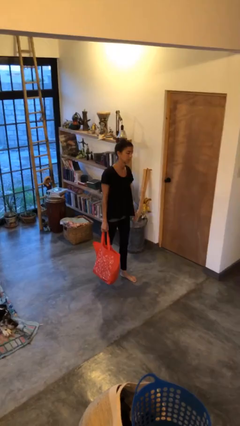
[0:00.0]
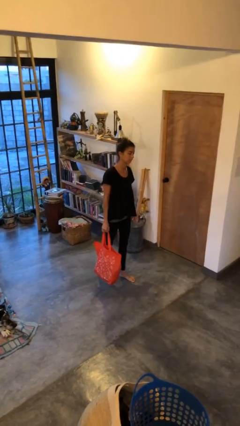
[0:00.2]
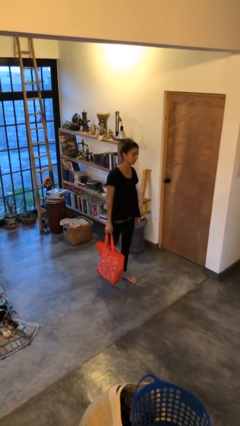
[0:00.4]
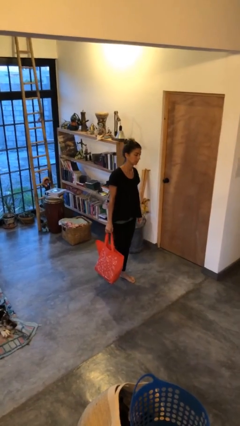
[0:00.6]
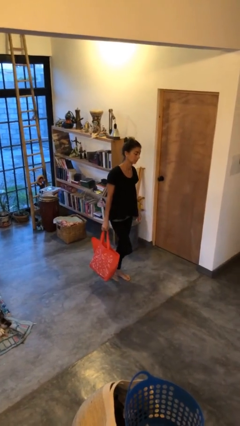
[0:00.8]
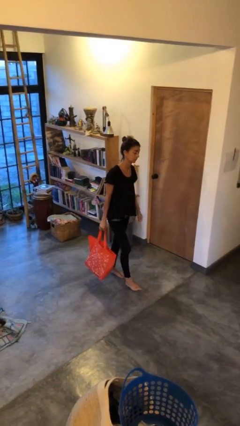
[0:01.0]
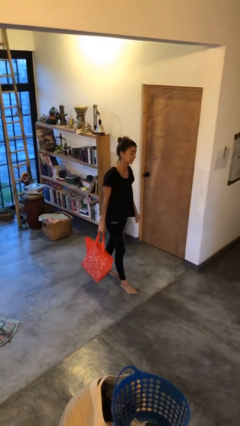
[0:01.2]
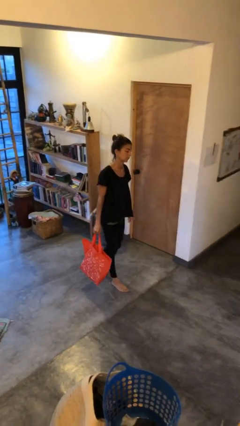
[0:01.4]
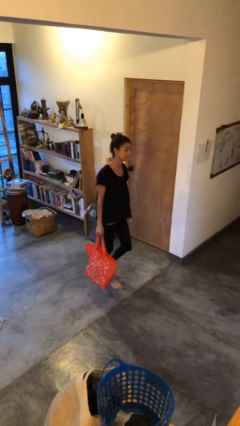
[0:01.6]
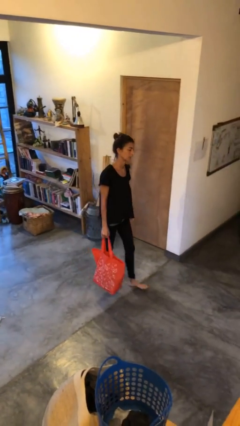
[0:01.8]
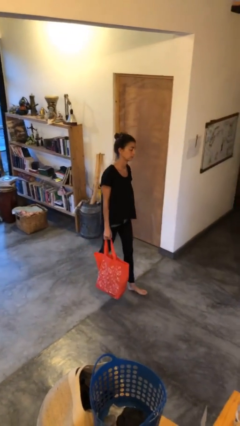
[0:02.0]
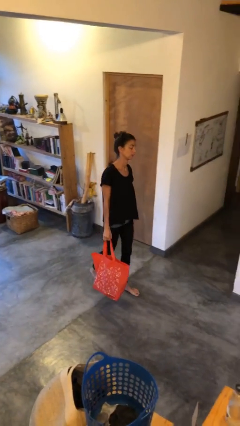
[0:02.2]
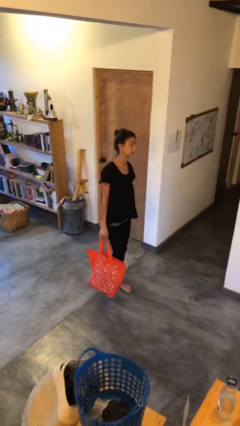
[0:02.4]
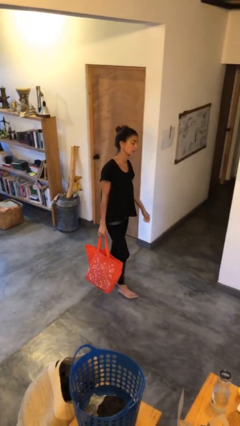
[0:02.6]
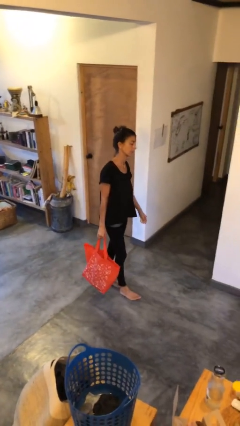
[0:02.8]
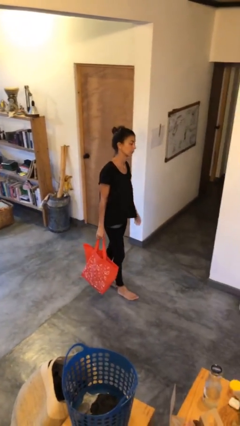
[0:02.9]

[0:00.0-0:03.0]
person carries groceries

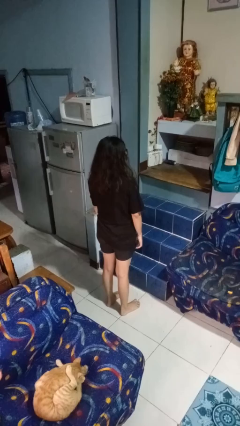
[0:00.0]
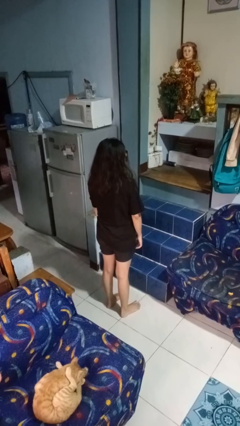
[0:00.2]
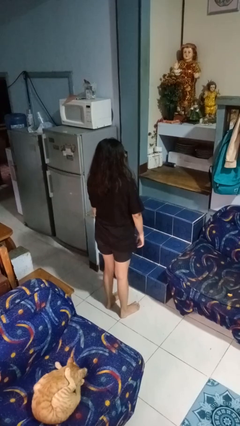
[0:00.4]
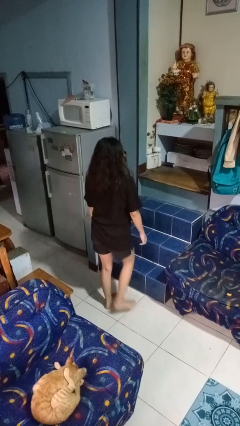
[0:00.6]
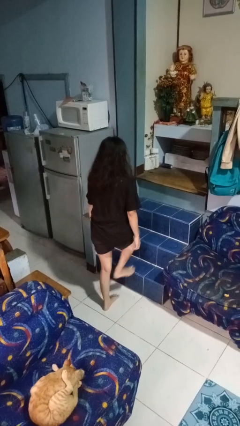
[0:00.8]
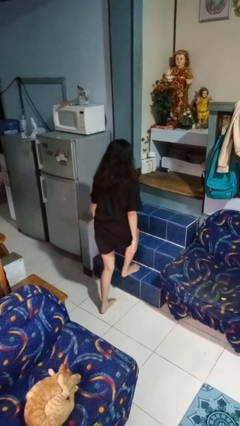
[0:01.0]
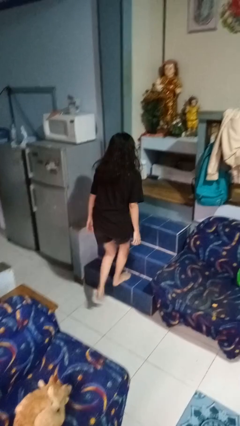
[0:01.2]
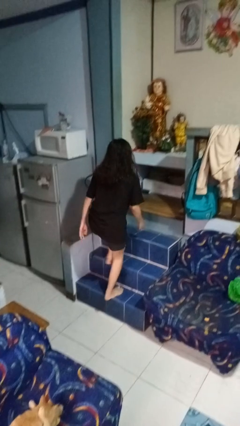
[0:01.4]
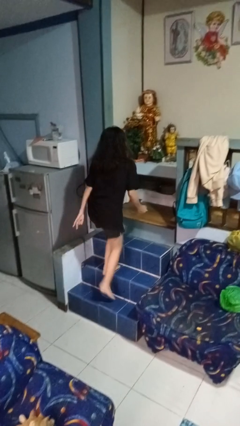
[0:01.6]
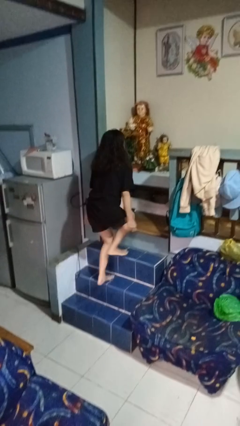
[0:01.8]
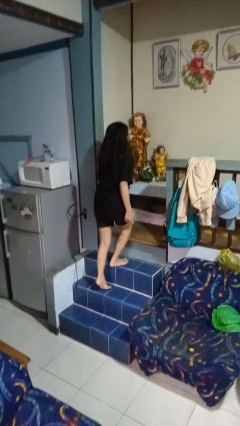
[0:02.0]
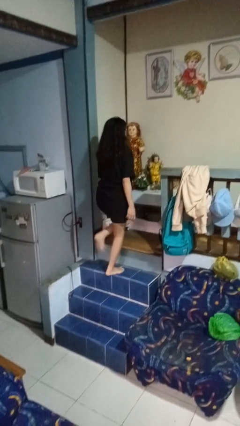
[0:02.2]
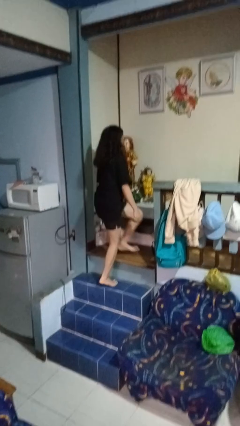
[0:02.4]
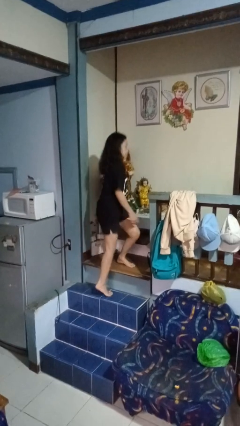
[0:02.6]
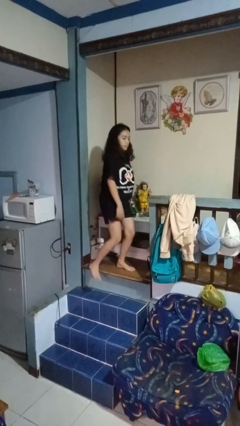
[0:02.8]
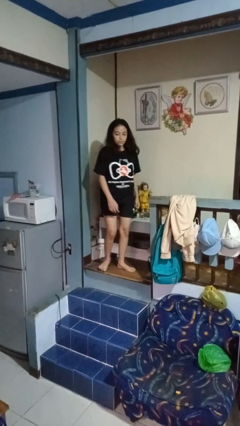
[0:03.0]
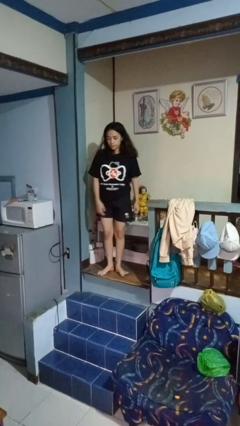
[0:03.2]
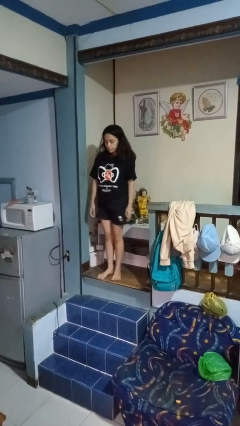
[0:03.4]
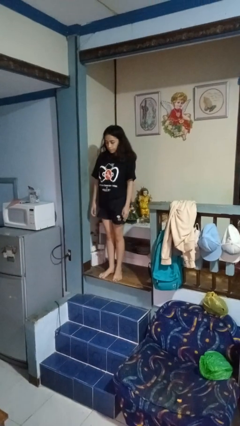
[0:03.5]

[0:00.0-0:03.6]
person climbs up stairs

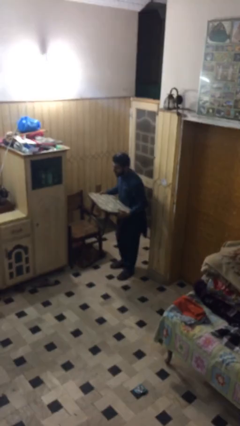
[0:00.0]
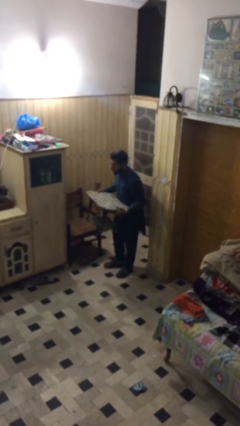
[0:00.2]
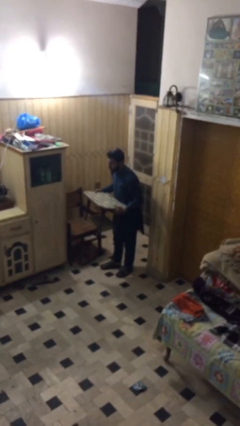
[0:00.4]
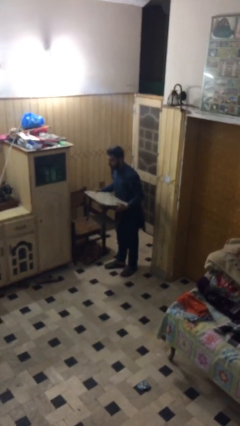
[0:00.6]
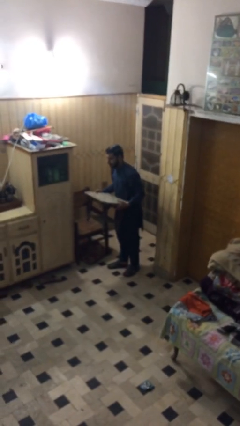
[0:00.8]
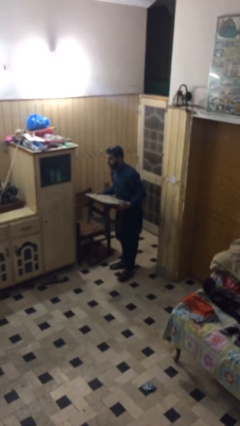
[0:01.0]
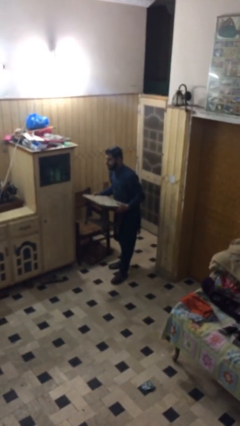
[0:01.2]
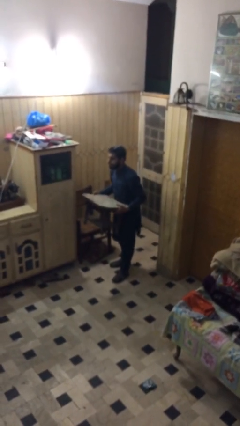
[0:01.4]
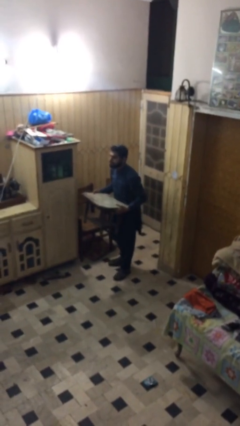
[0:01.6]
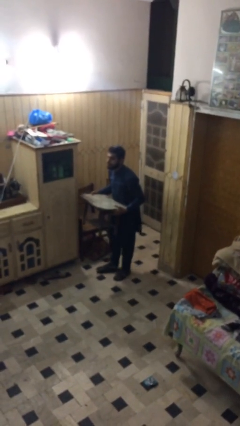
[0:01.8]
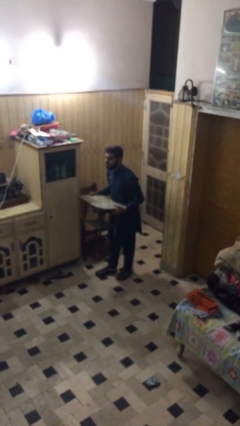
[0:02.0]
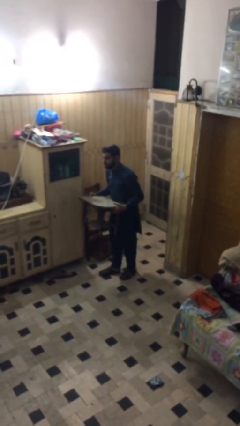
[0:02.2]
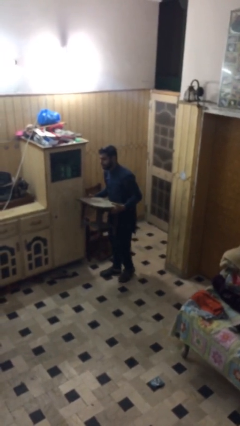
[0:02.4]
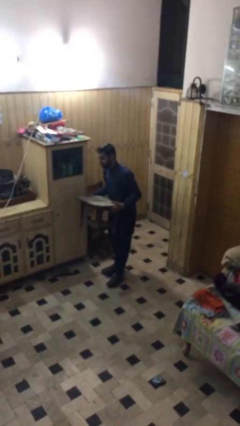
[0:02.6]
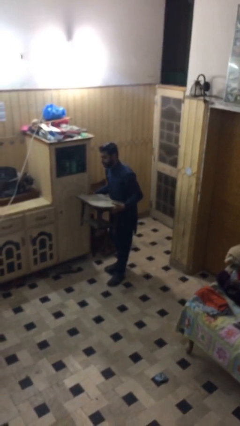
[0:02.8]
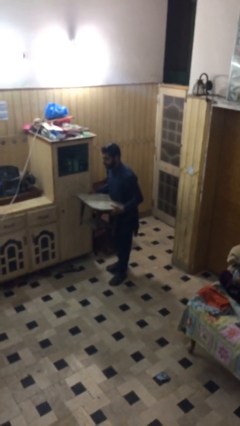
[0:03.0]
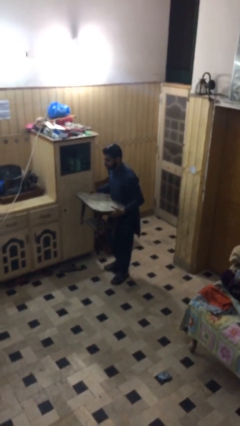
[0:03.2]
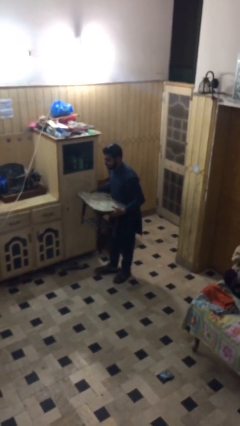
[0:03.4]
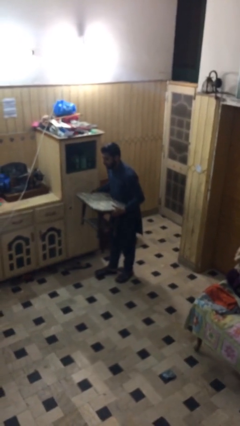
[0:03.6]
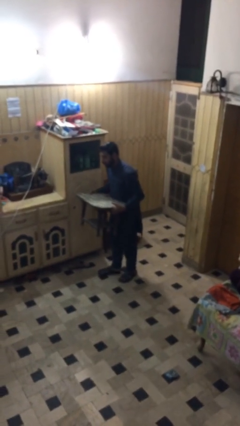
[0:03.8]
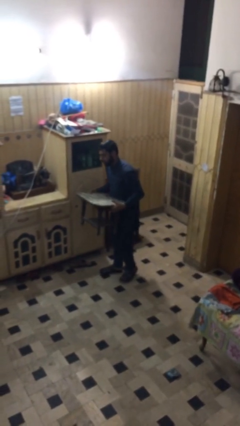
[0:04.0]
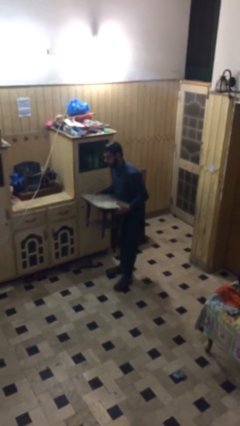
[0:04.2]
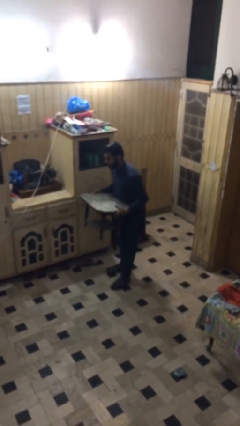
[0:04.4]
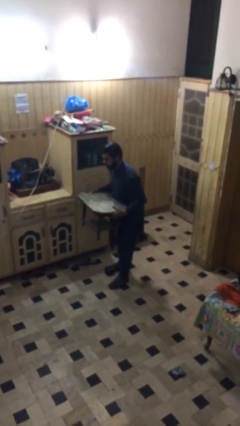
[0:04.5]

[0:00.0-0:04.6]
person carries heavy object

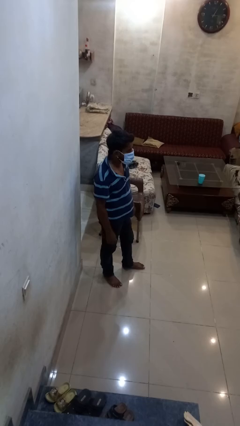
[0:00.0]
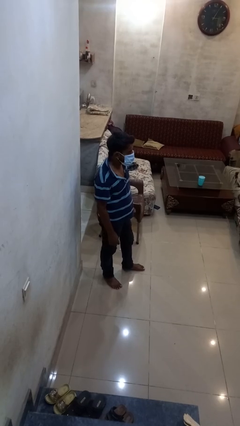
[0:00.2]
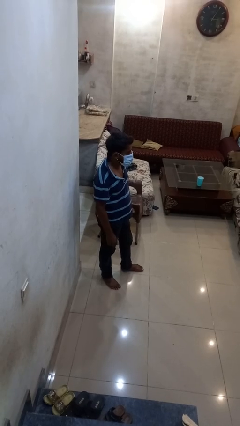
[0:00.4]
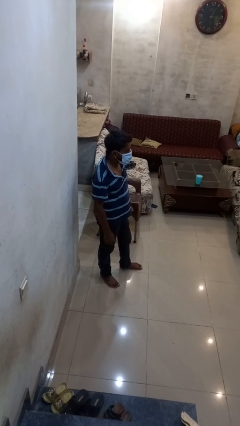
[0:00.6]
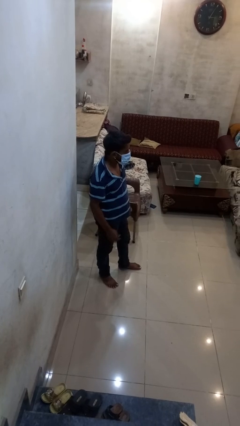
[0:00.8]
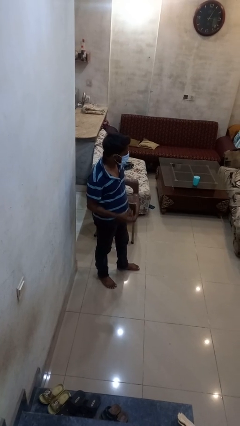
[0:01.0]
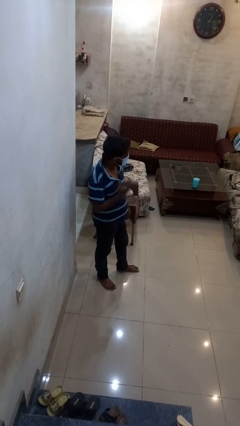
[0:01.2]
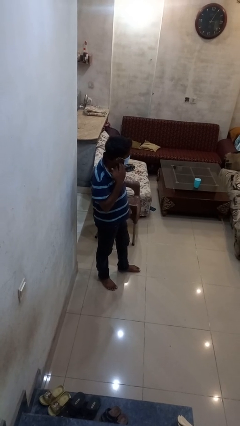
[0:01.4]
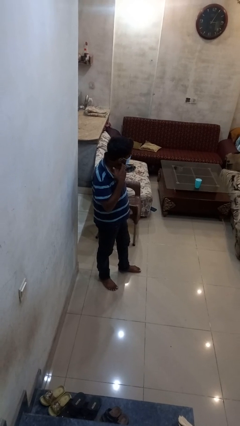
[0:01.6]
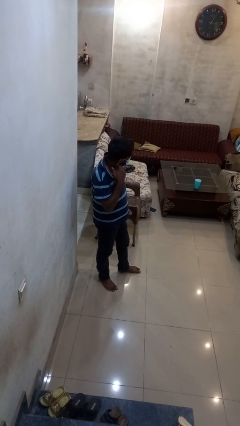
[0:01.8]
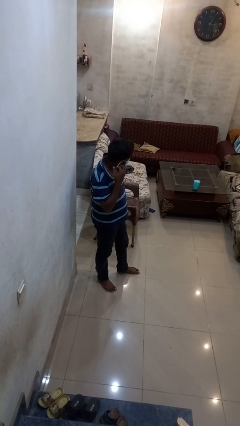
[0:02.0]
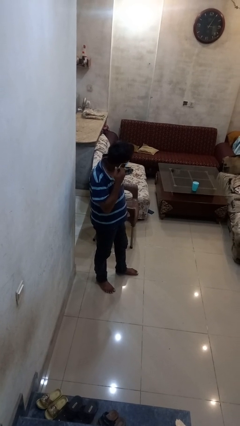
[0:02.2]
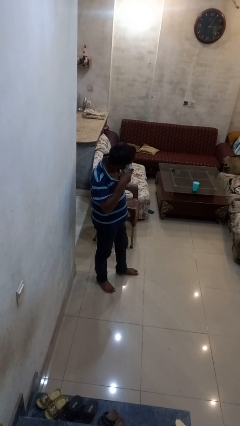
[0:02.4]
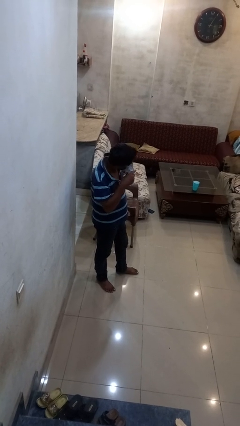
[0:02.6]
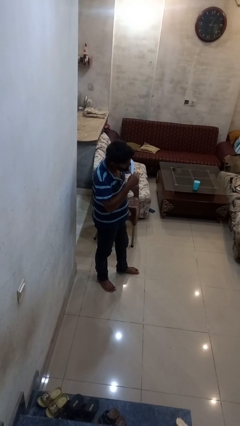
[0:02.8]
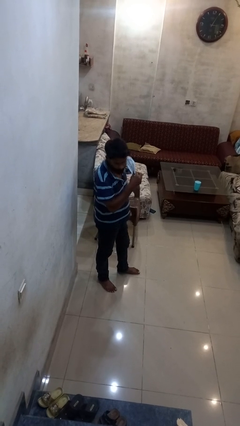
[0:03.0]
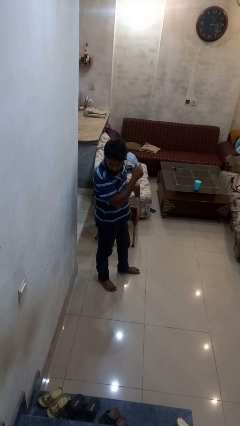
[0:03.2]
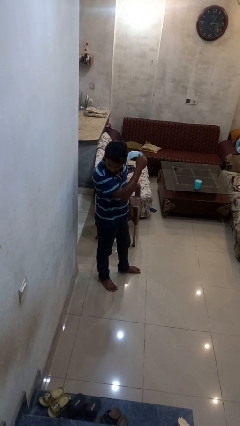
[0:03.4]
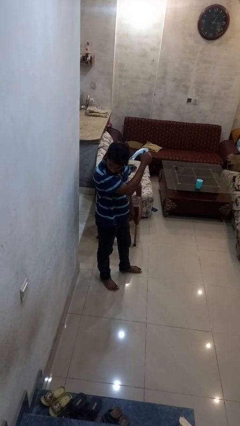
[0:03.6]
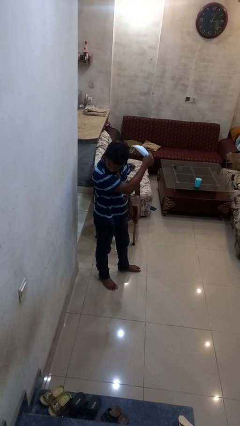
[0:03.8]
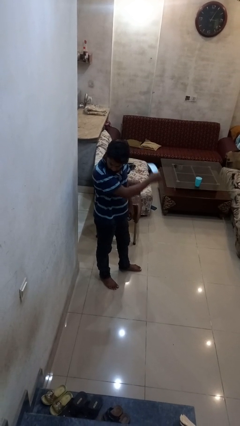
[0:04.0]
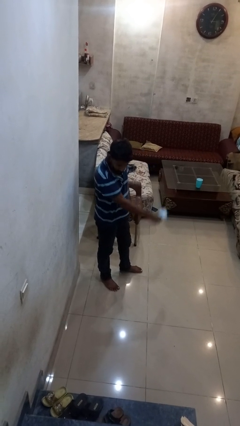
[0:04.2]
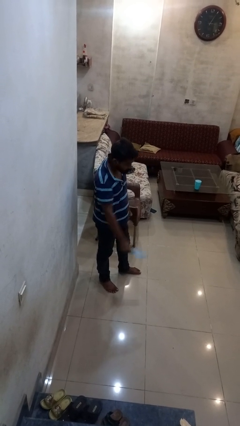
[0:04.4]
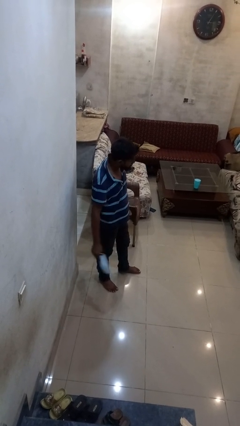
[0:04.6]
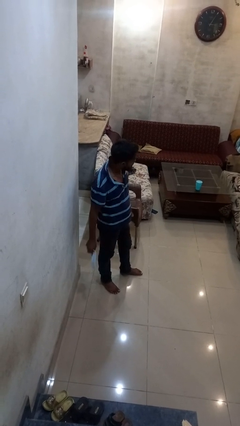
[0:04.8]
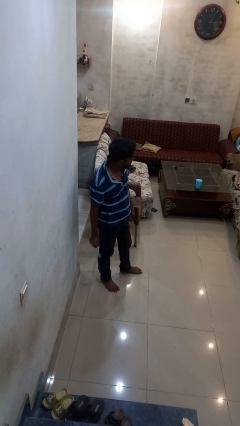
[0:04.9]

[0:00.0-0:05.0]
person takes off facemask

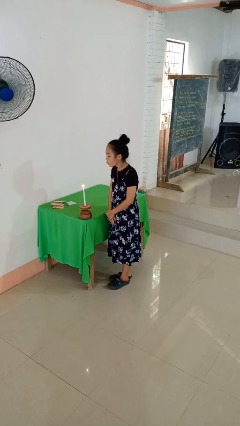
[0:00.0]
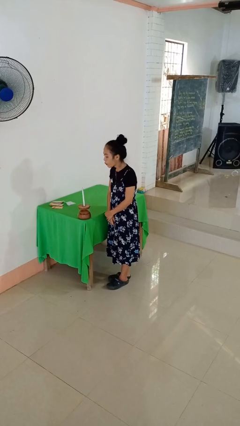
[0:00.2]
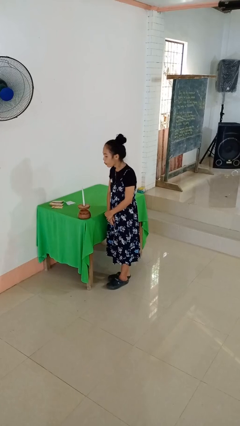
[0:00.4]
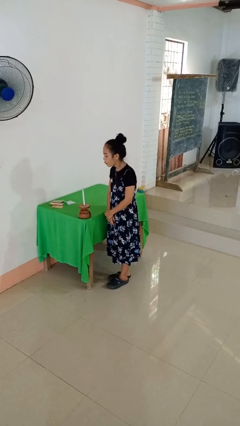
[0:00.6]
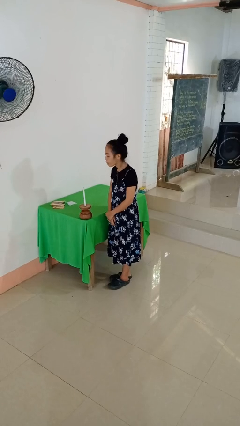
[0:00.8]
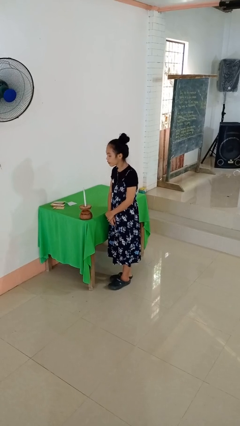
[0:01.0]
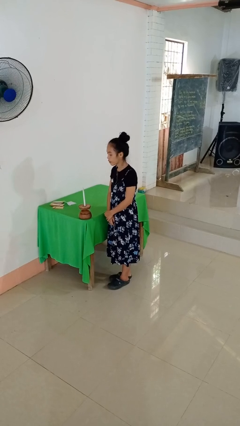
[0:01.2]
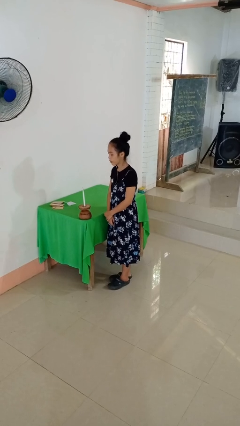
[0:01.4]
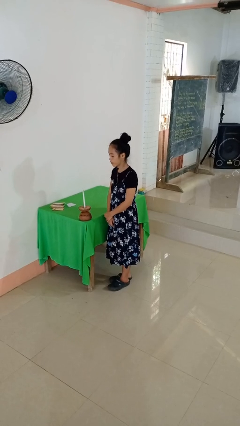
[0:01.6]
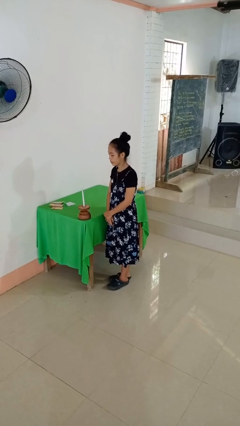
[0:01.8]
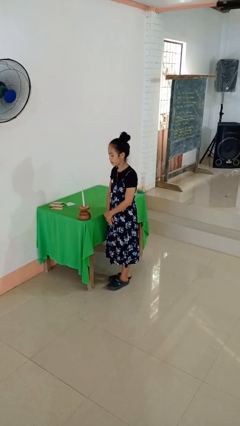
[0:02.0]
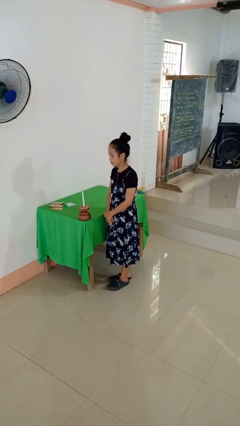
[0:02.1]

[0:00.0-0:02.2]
person extinguishes candle
